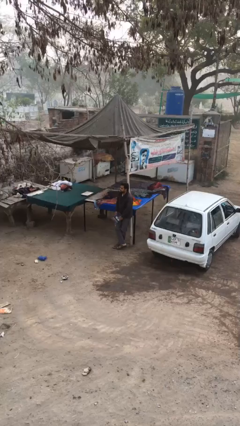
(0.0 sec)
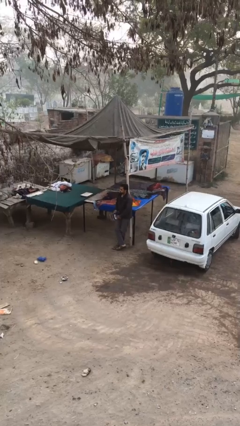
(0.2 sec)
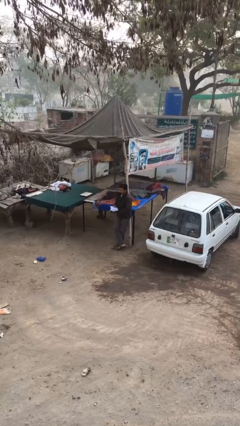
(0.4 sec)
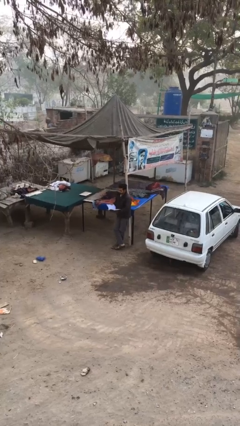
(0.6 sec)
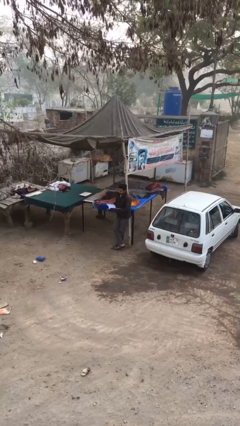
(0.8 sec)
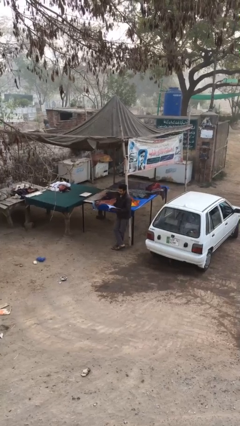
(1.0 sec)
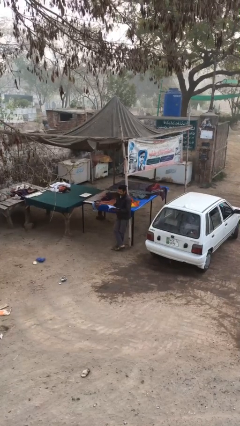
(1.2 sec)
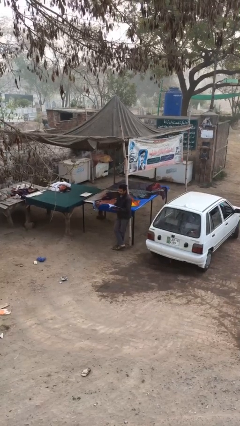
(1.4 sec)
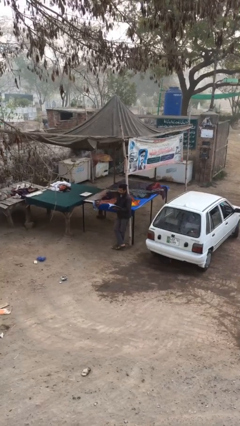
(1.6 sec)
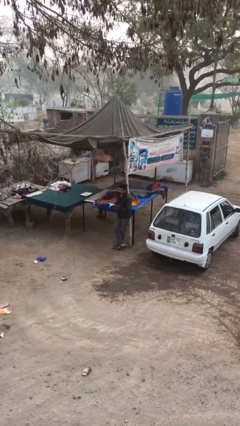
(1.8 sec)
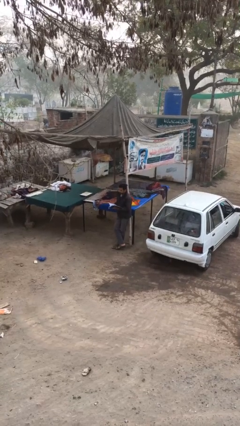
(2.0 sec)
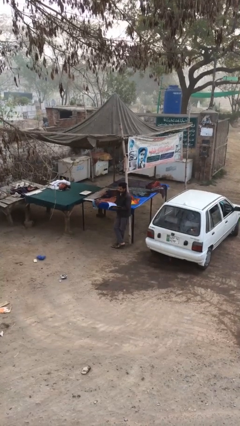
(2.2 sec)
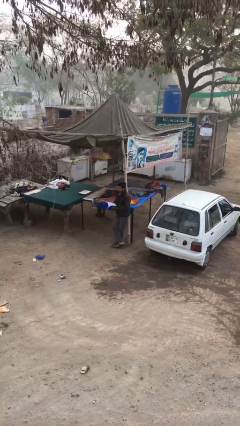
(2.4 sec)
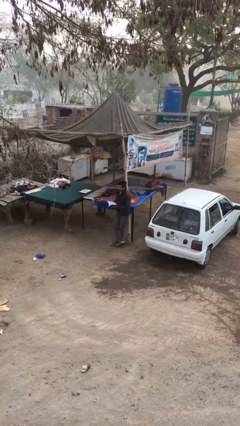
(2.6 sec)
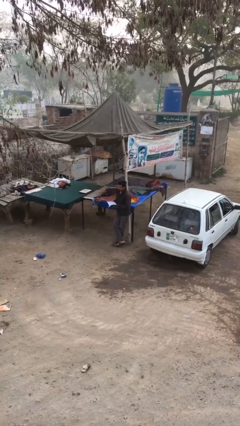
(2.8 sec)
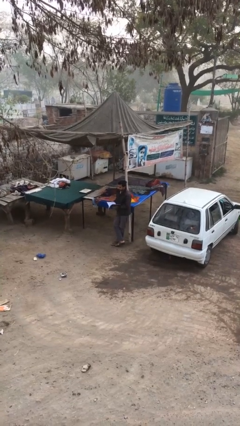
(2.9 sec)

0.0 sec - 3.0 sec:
person reads document

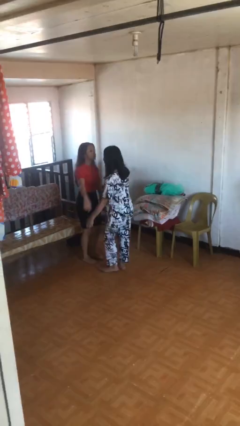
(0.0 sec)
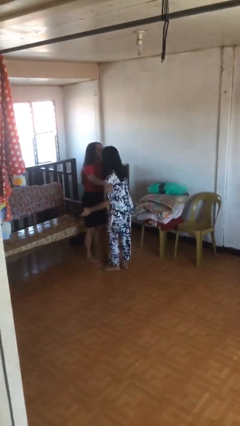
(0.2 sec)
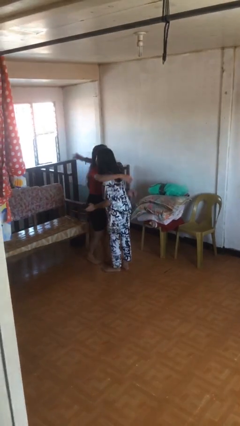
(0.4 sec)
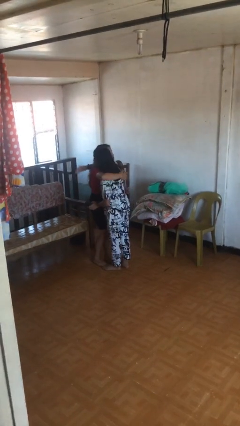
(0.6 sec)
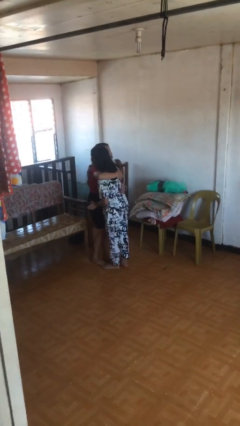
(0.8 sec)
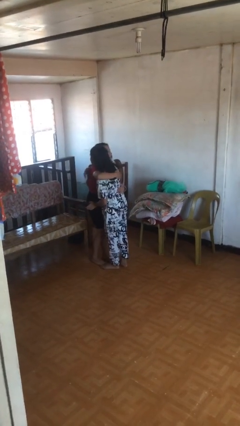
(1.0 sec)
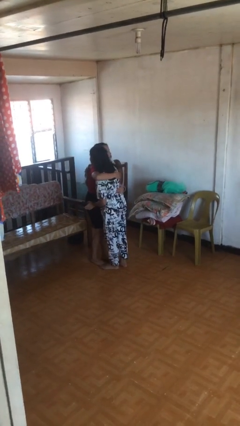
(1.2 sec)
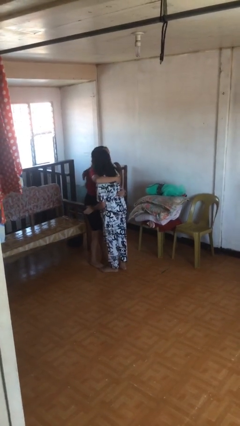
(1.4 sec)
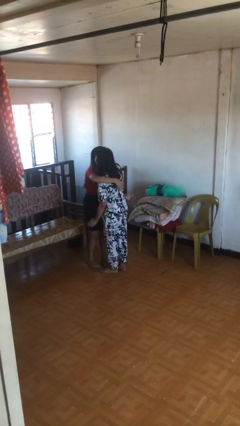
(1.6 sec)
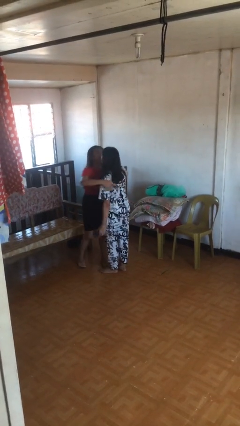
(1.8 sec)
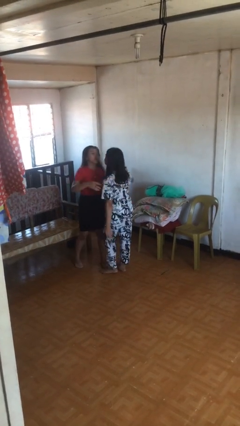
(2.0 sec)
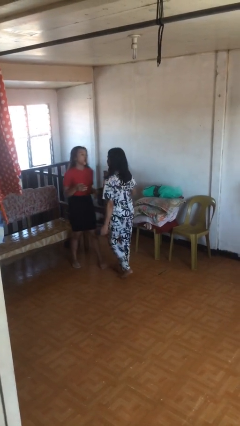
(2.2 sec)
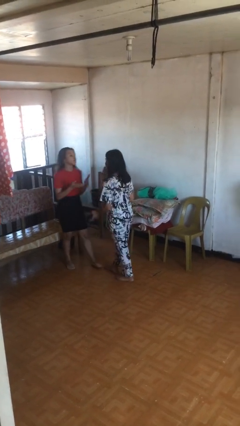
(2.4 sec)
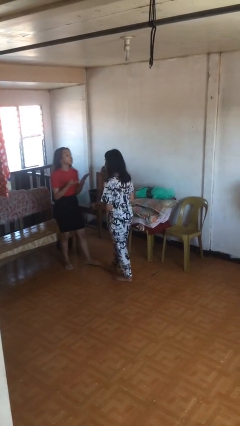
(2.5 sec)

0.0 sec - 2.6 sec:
person embraces person

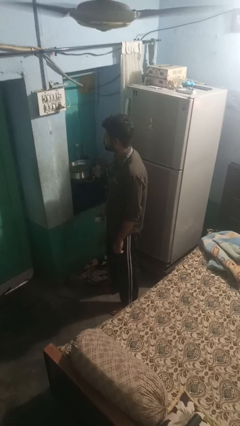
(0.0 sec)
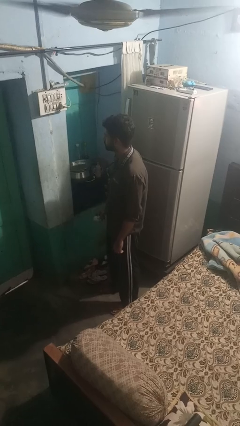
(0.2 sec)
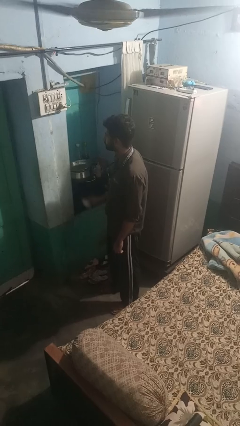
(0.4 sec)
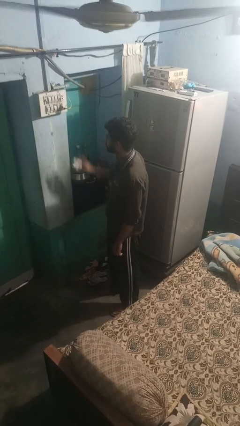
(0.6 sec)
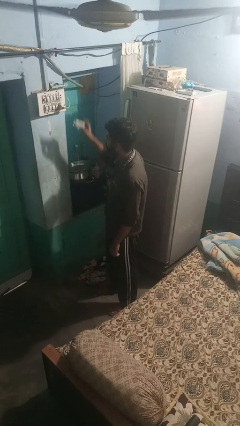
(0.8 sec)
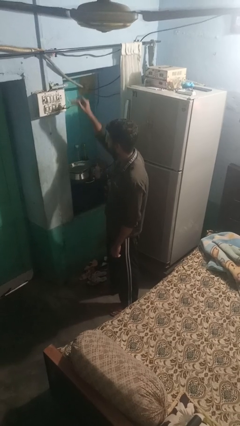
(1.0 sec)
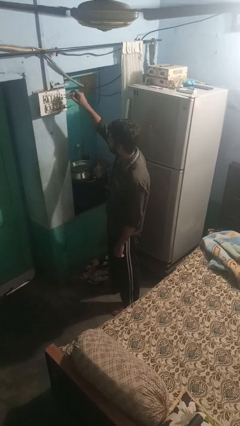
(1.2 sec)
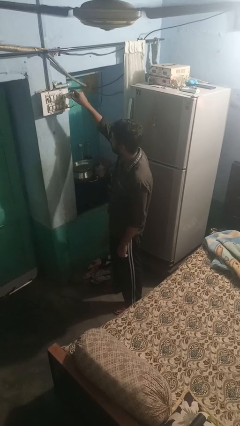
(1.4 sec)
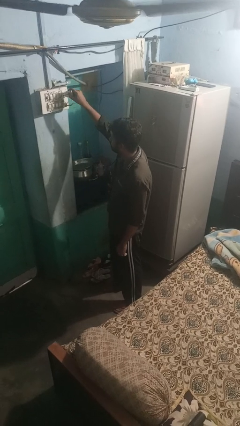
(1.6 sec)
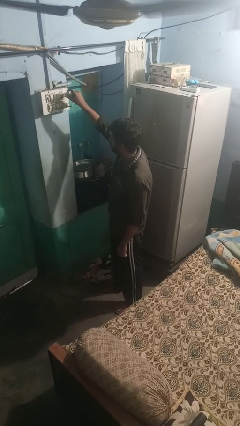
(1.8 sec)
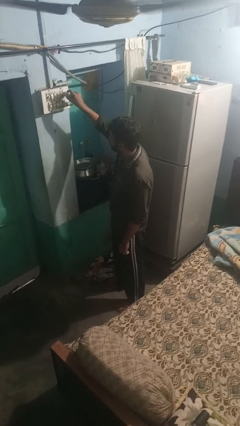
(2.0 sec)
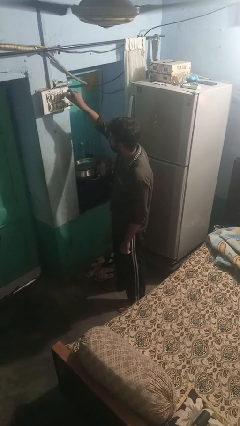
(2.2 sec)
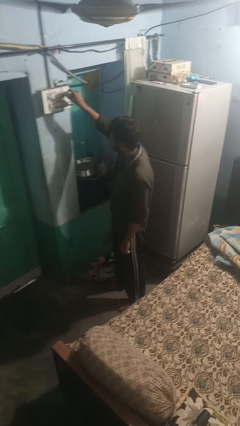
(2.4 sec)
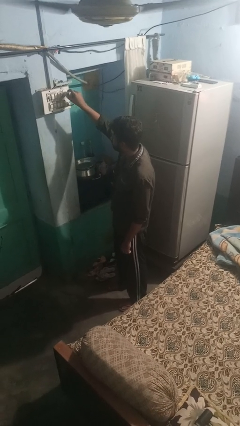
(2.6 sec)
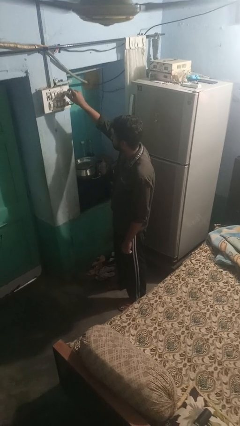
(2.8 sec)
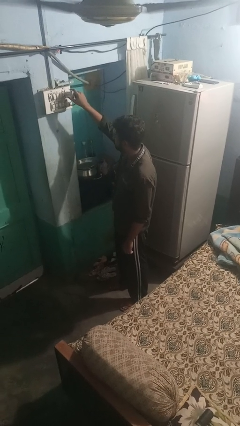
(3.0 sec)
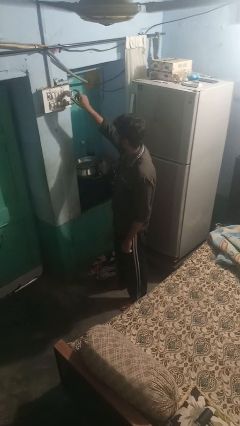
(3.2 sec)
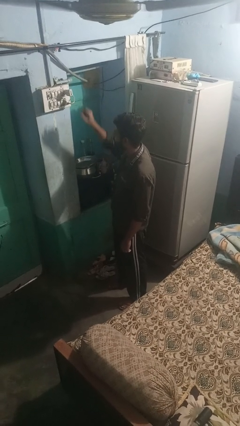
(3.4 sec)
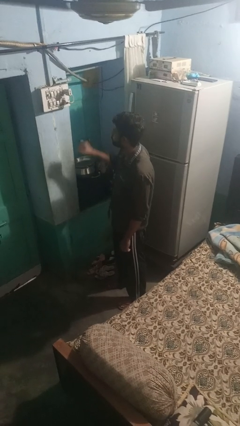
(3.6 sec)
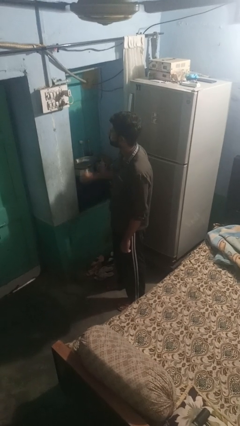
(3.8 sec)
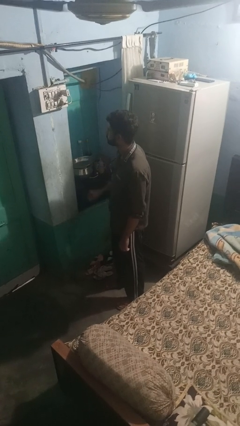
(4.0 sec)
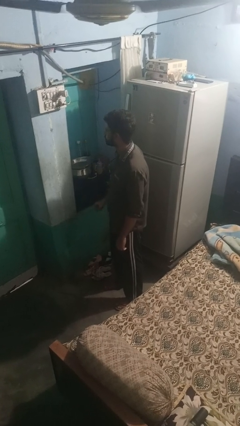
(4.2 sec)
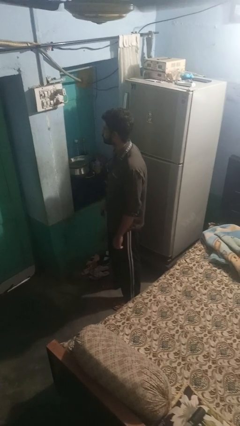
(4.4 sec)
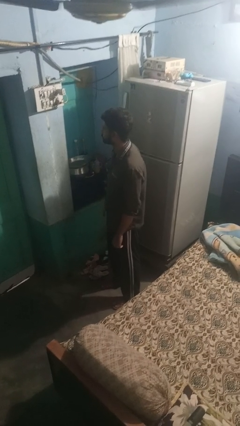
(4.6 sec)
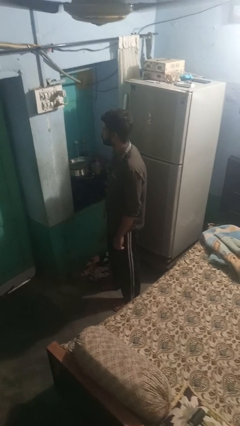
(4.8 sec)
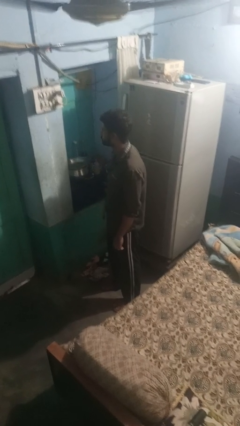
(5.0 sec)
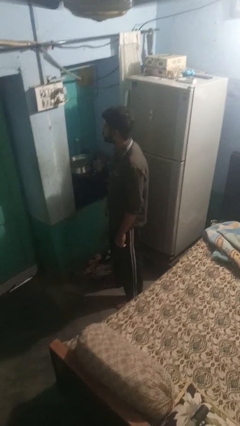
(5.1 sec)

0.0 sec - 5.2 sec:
person plugs into electrical socket

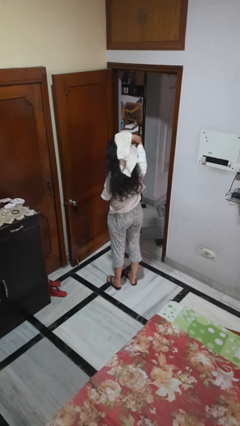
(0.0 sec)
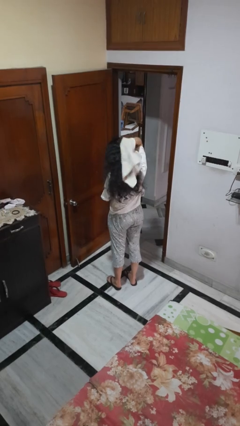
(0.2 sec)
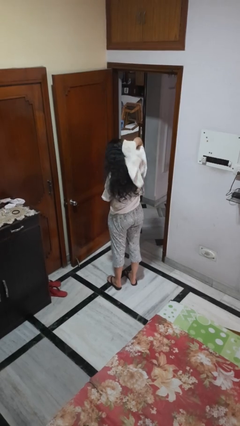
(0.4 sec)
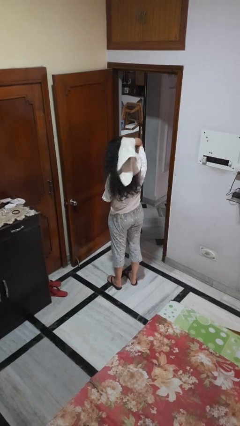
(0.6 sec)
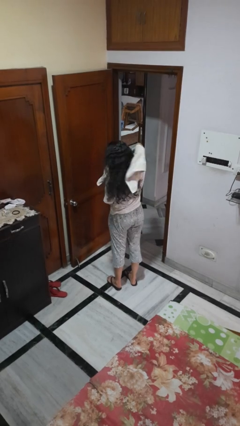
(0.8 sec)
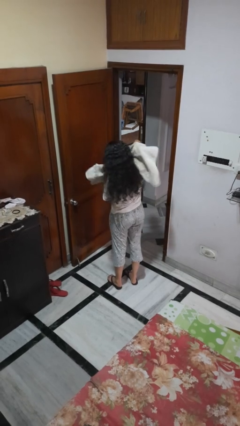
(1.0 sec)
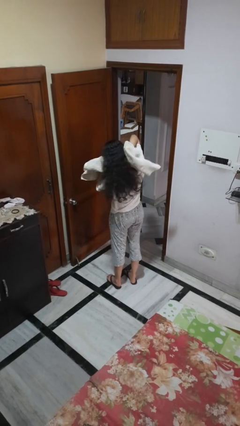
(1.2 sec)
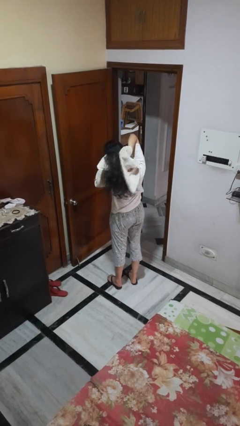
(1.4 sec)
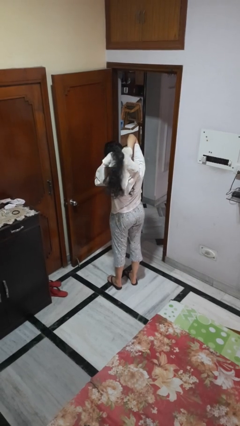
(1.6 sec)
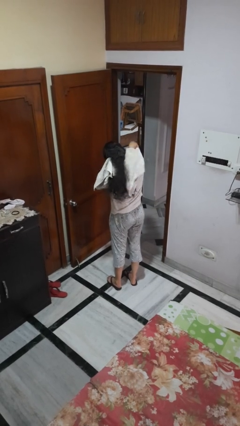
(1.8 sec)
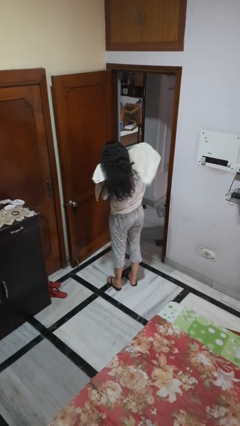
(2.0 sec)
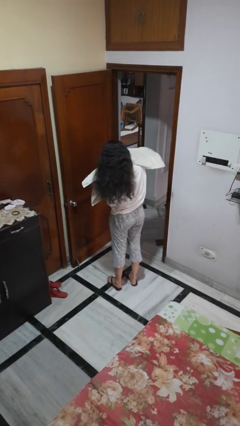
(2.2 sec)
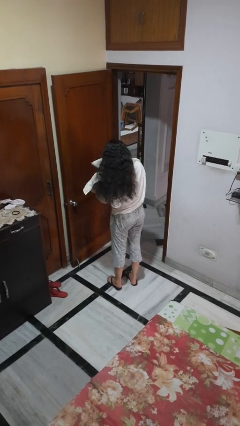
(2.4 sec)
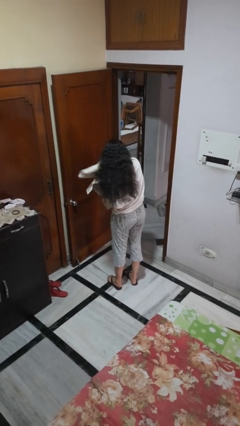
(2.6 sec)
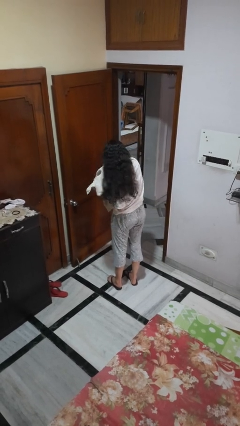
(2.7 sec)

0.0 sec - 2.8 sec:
person dries hair with towel

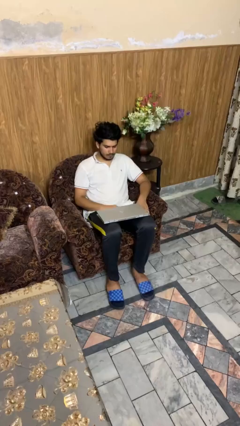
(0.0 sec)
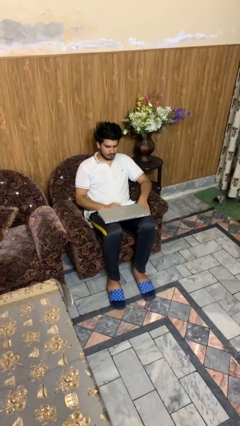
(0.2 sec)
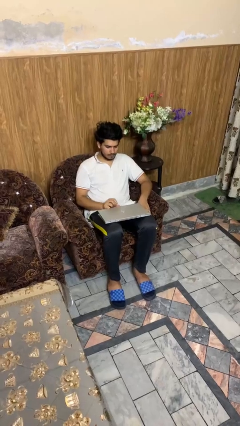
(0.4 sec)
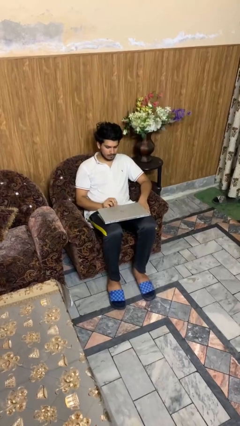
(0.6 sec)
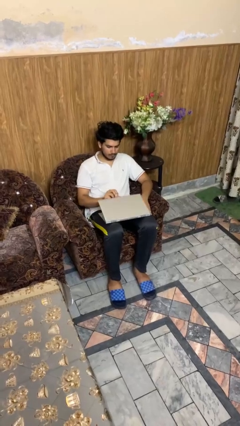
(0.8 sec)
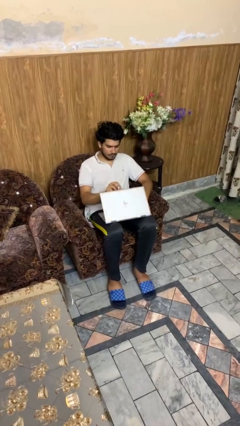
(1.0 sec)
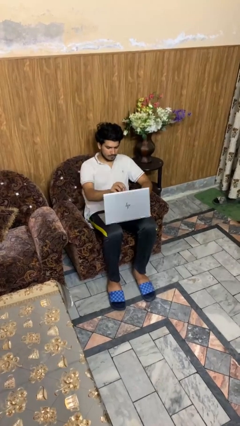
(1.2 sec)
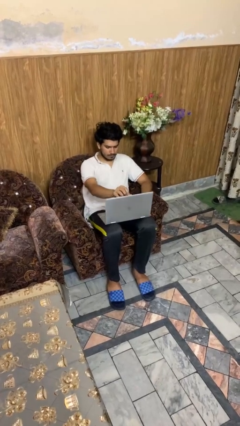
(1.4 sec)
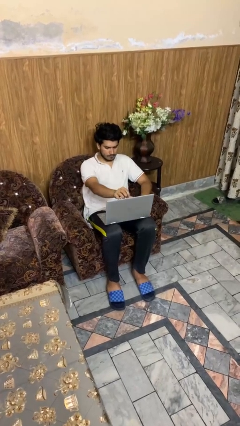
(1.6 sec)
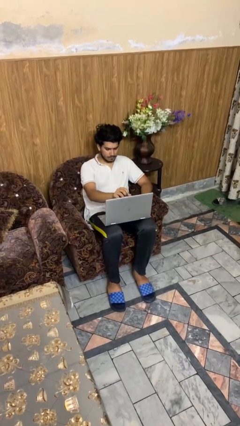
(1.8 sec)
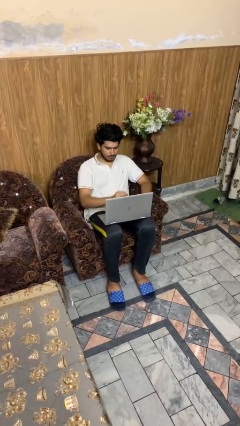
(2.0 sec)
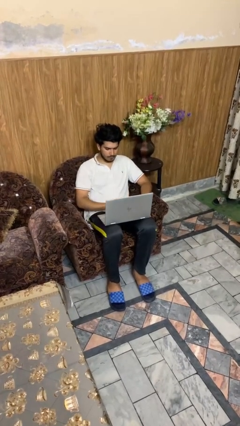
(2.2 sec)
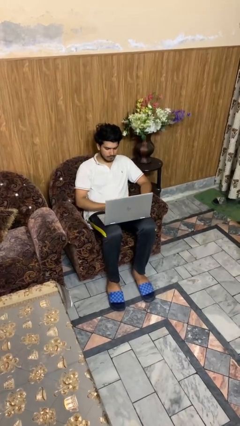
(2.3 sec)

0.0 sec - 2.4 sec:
person opens laptop

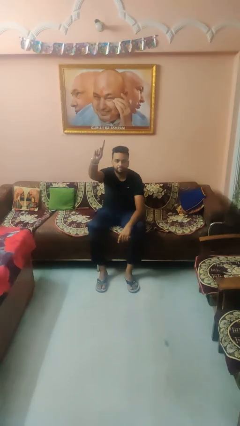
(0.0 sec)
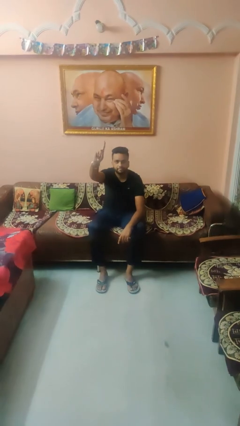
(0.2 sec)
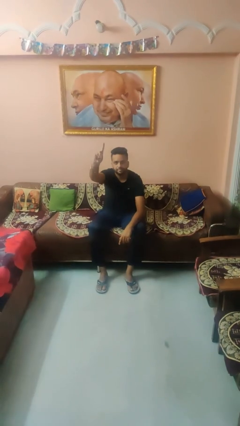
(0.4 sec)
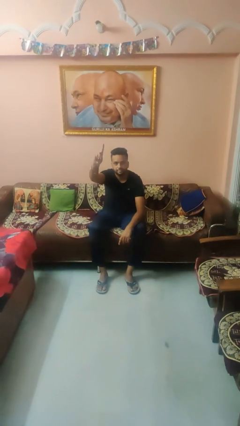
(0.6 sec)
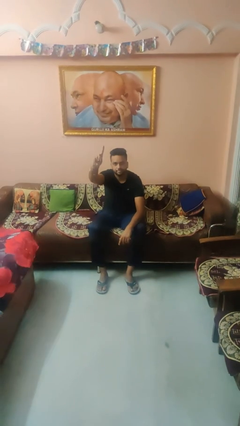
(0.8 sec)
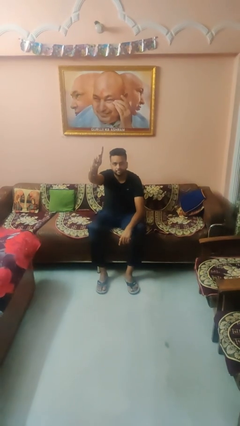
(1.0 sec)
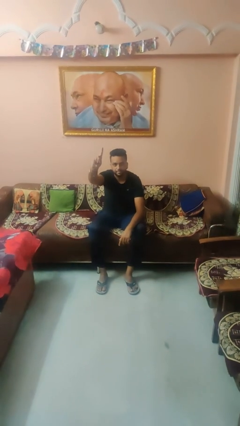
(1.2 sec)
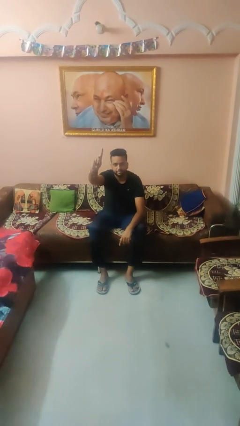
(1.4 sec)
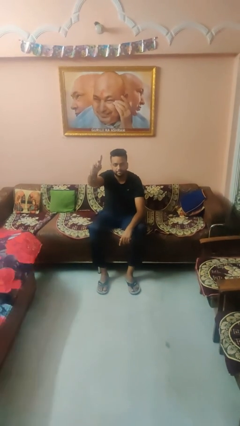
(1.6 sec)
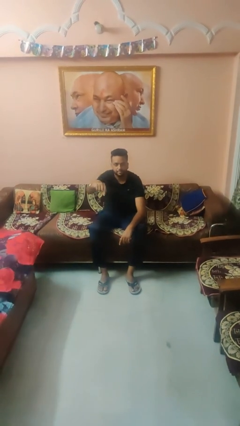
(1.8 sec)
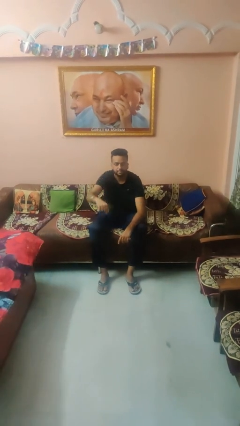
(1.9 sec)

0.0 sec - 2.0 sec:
person gestures number one
